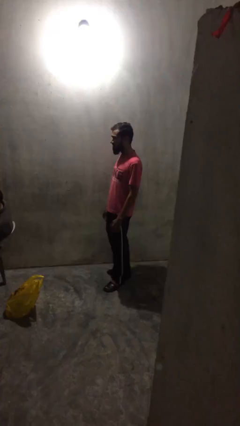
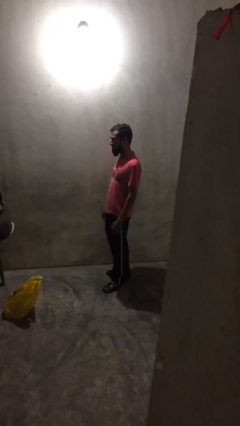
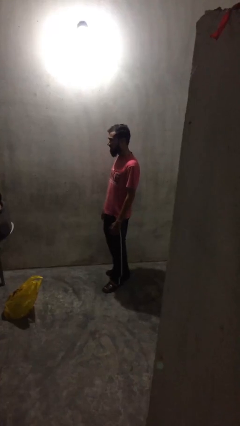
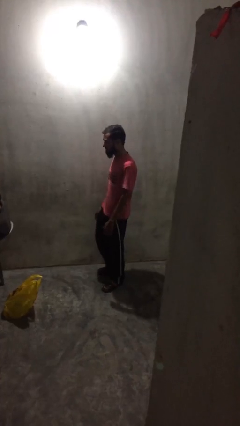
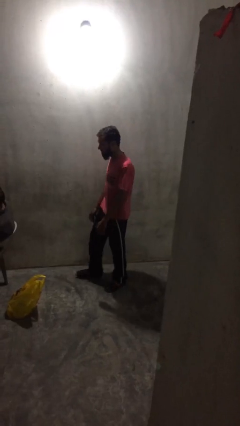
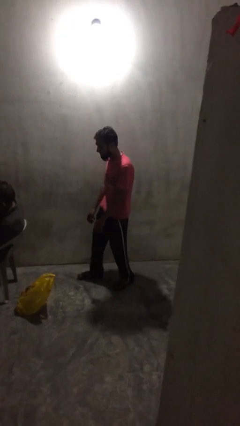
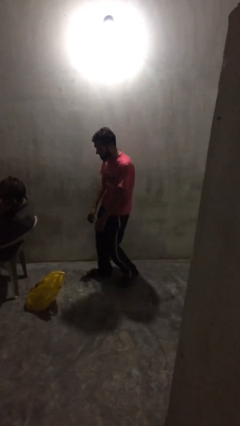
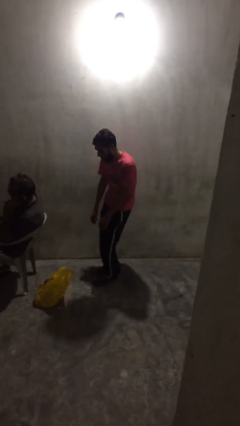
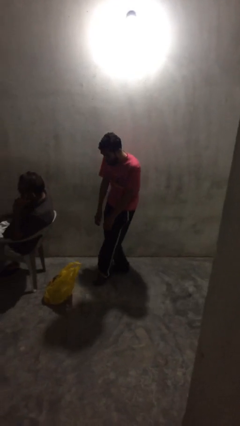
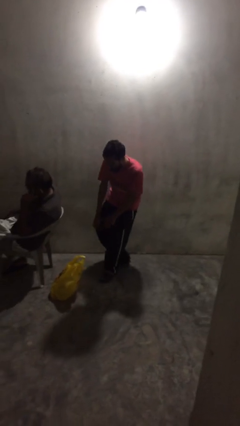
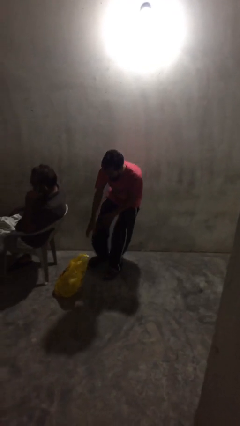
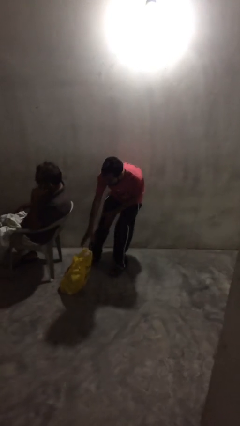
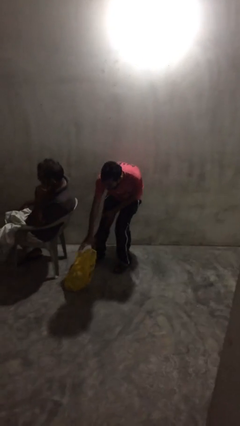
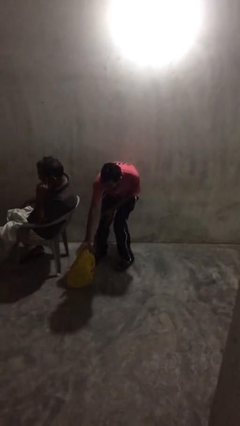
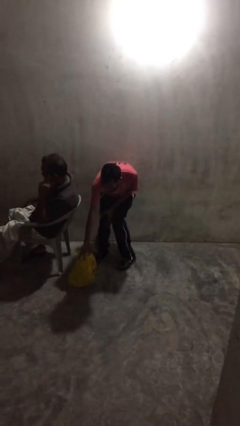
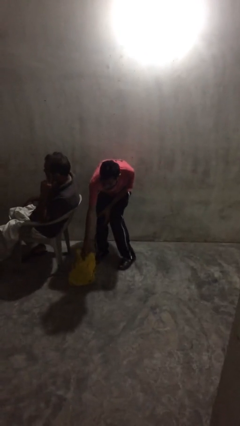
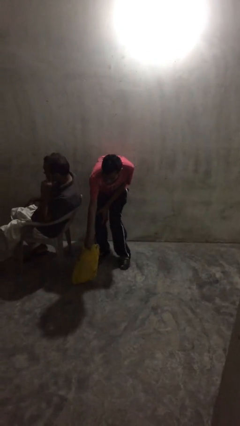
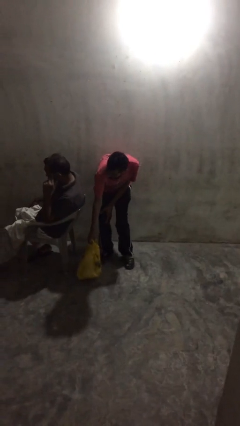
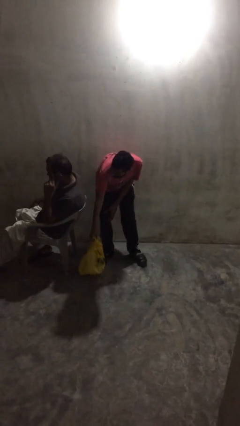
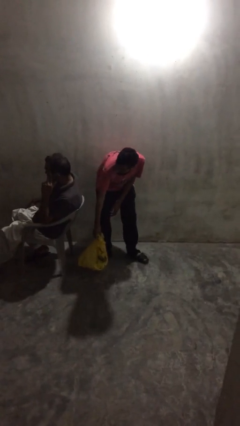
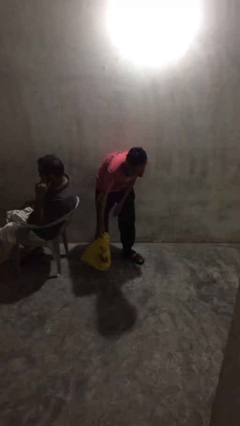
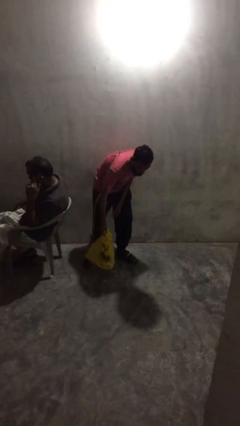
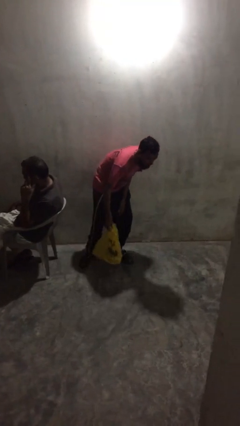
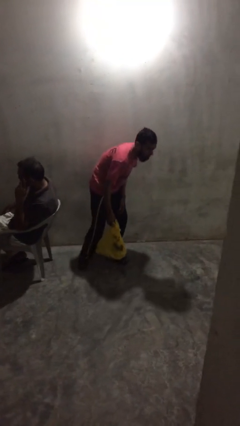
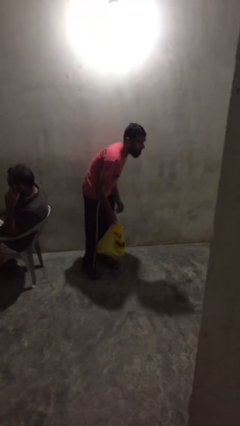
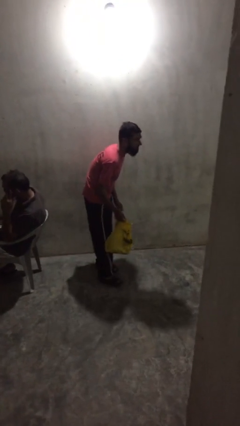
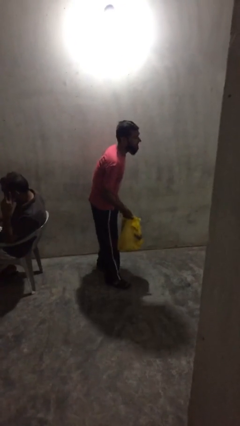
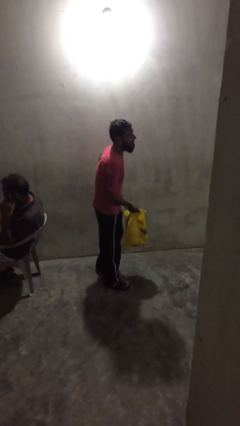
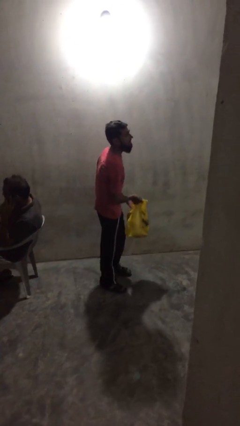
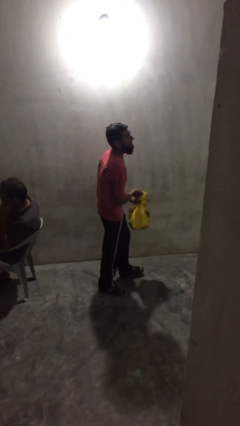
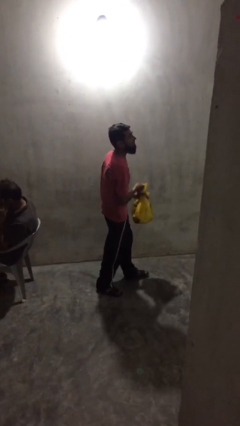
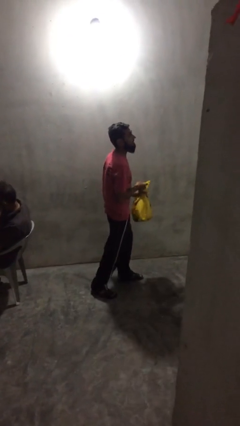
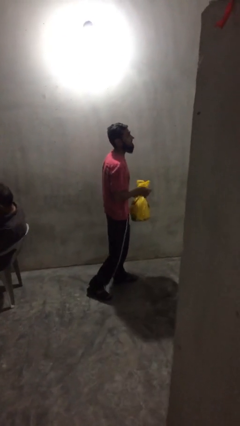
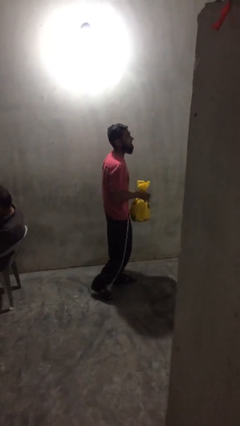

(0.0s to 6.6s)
person steals object from person

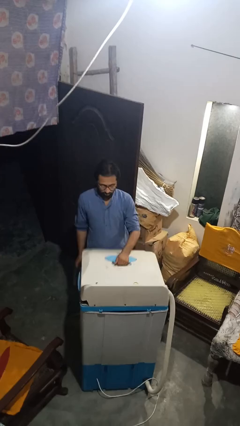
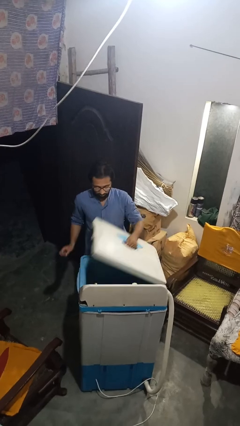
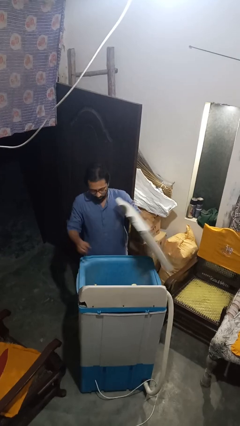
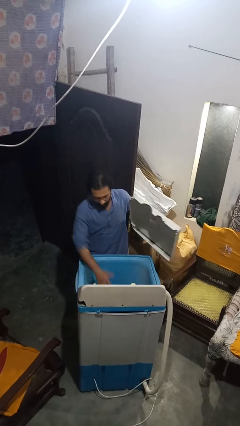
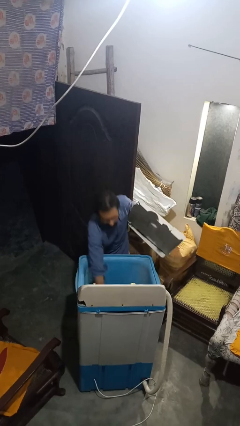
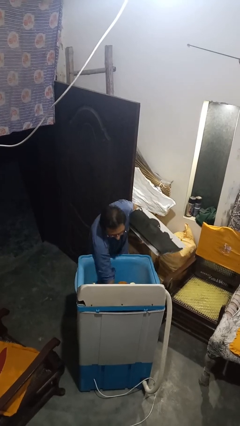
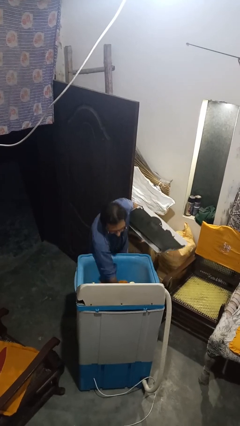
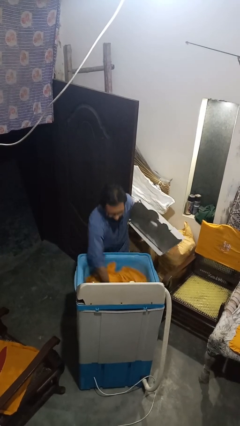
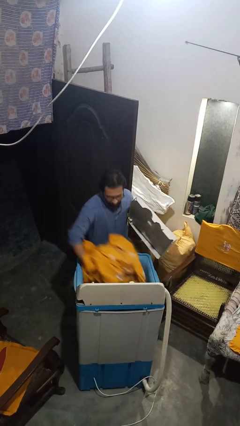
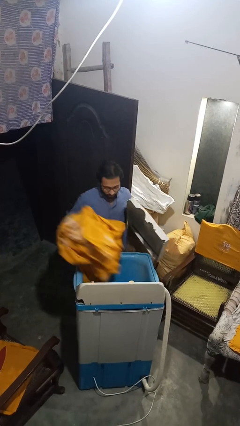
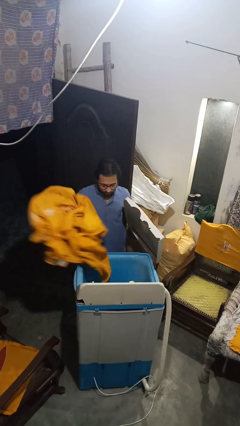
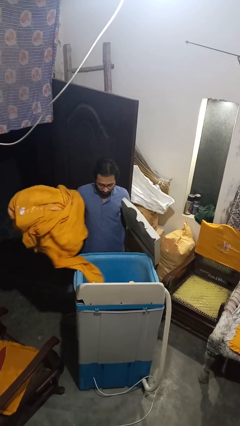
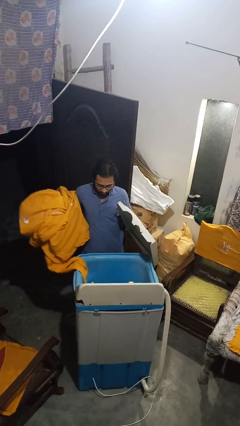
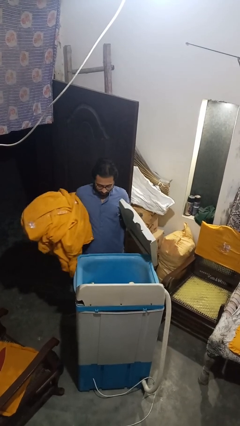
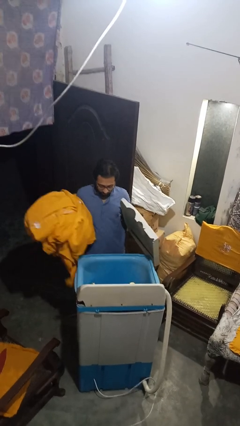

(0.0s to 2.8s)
person opens clothes washer

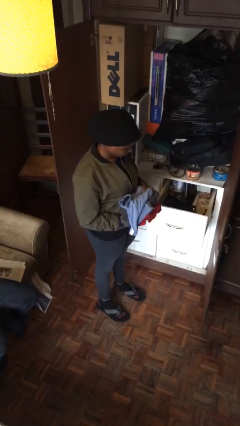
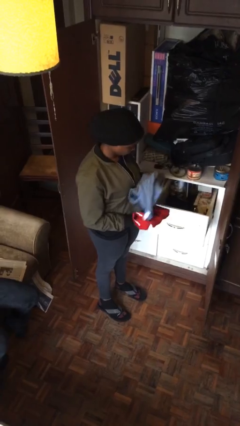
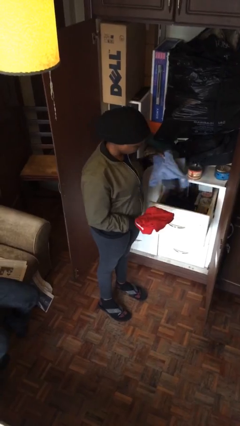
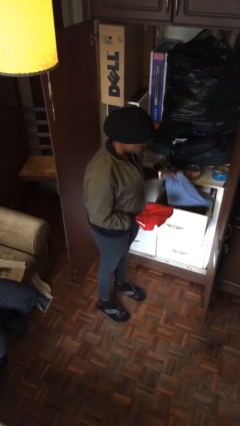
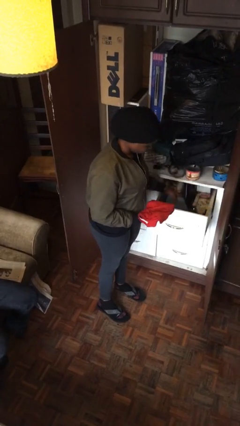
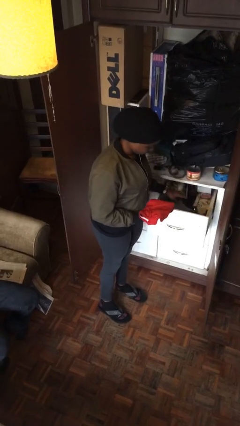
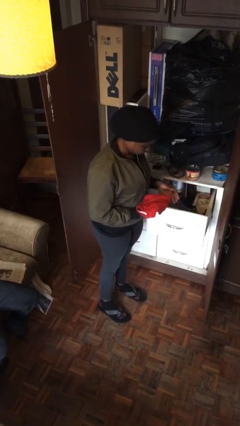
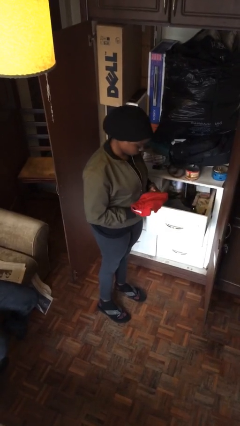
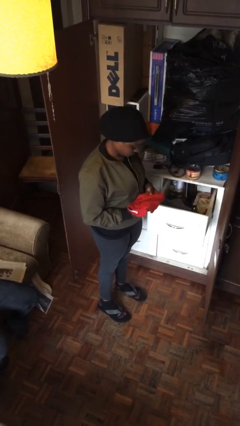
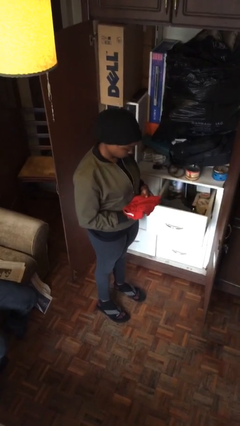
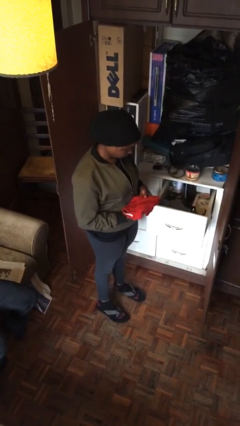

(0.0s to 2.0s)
person puts clothes into dresser

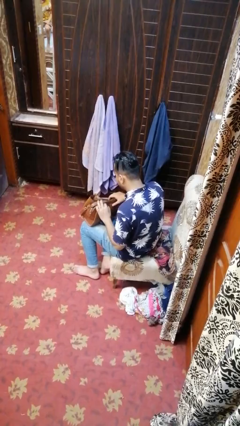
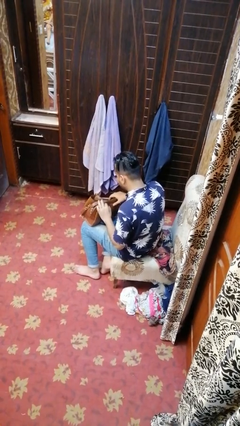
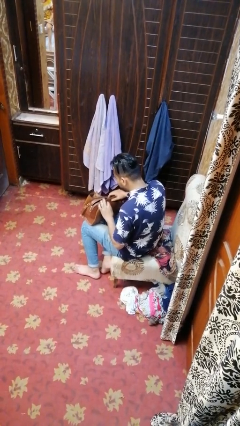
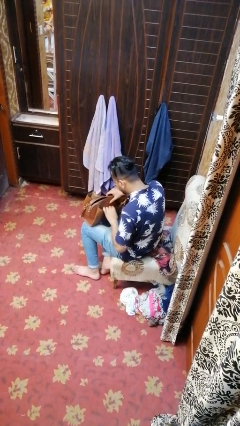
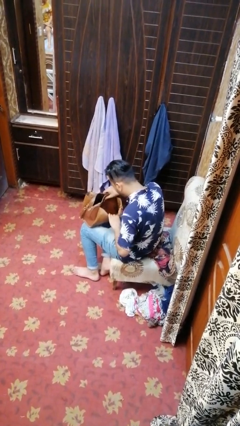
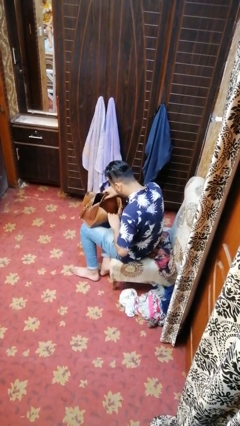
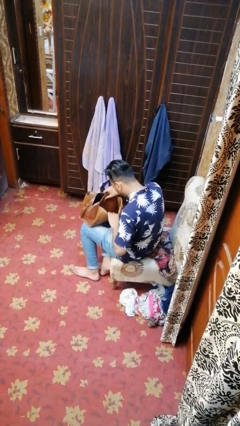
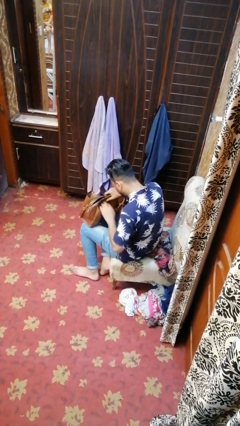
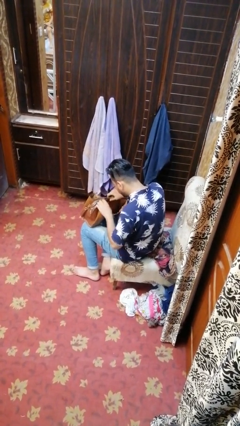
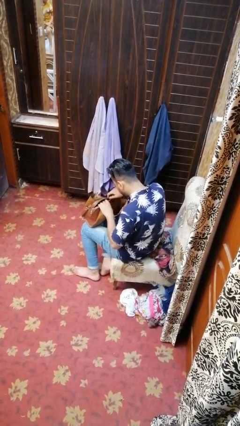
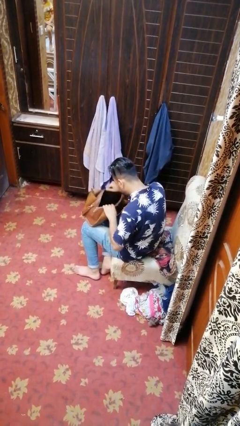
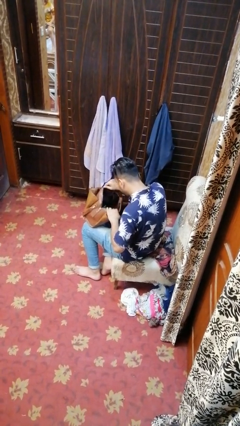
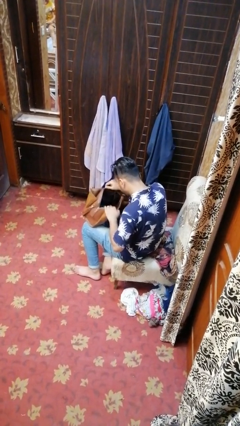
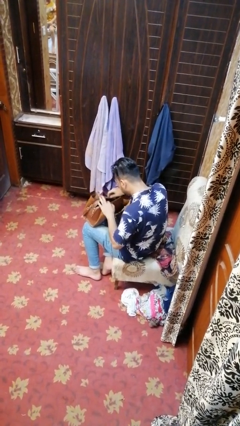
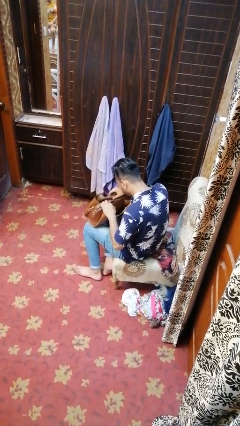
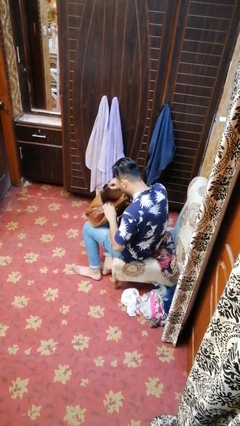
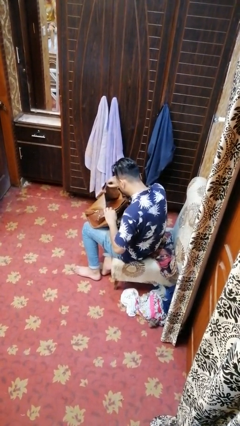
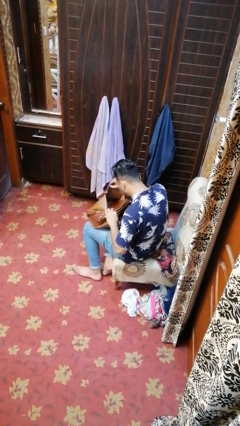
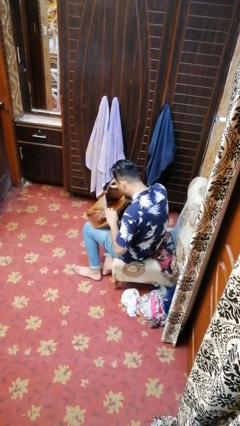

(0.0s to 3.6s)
person searches in purse

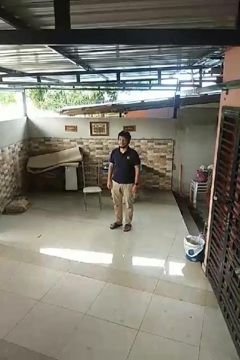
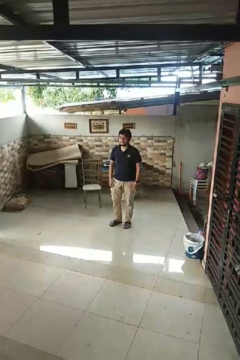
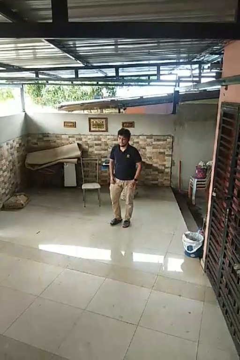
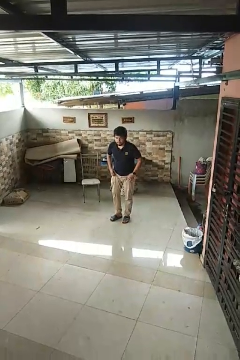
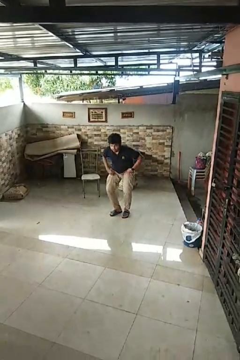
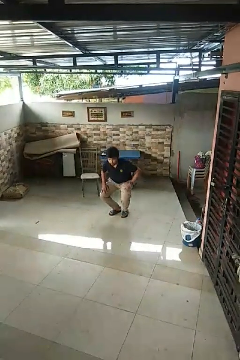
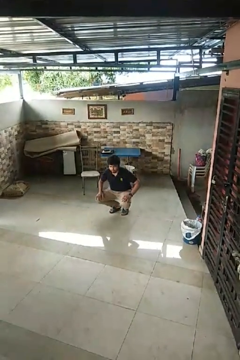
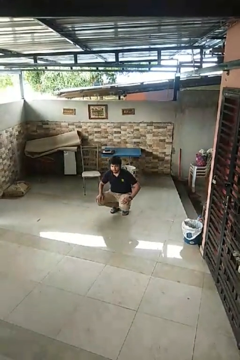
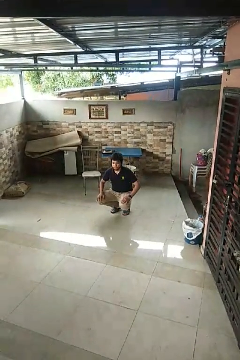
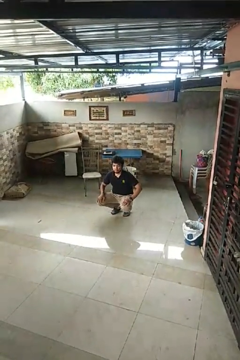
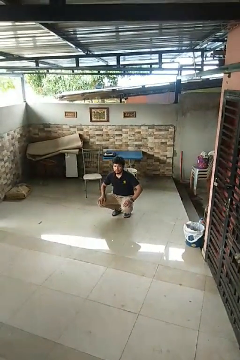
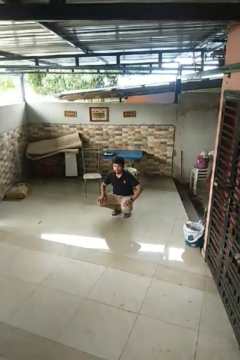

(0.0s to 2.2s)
person squats

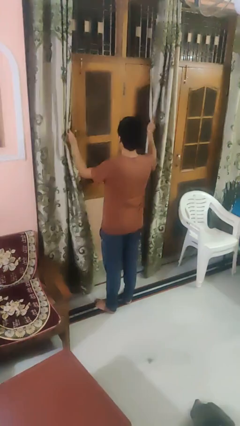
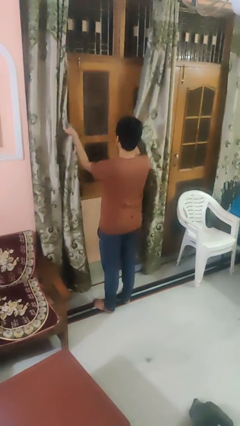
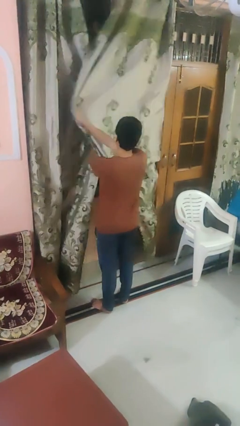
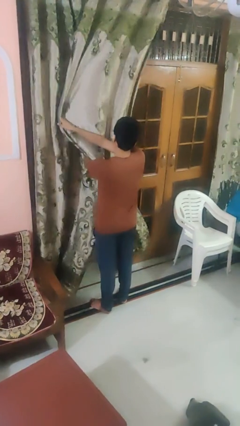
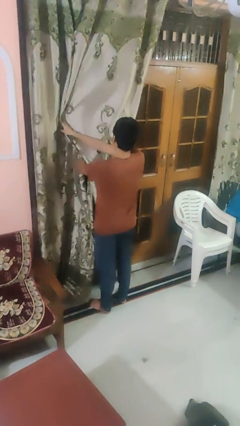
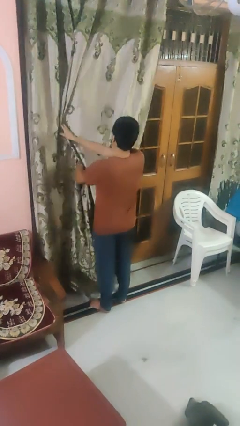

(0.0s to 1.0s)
person closes curtains
